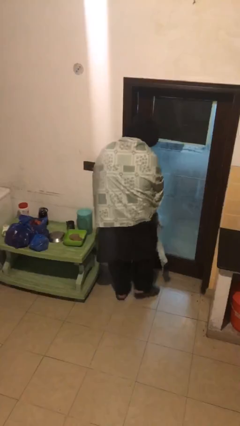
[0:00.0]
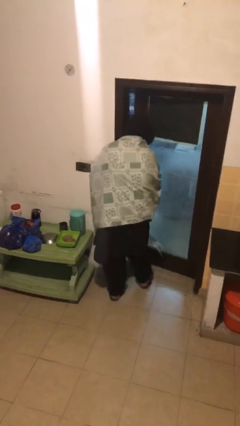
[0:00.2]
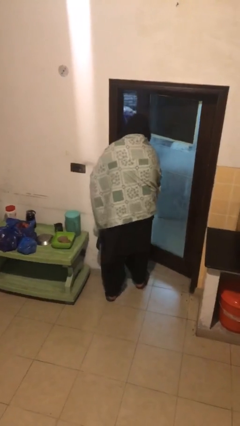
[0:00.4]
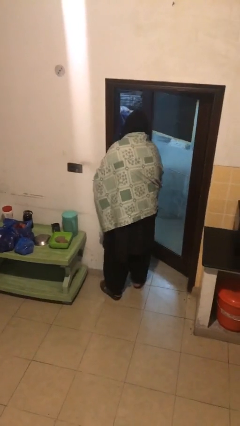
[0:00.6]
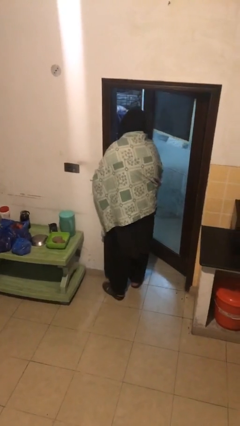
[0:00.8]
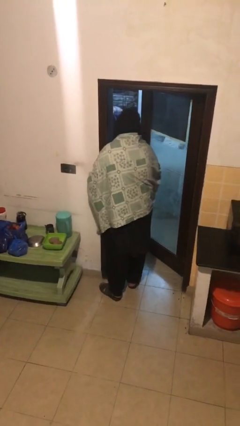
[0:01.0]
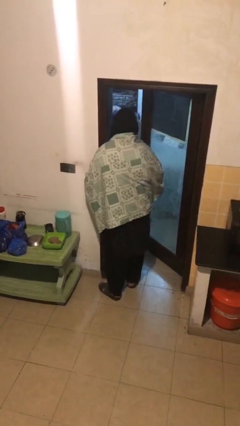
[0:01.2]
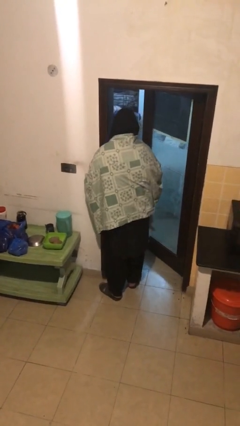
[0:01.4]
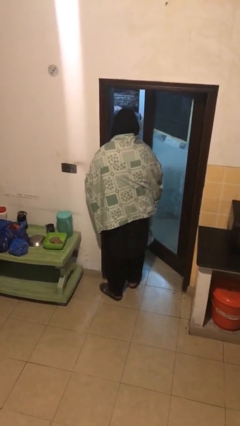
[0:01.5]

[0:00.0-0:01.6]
person opens facility door

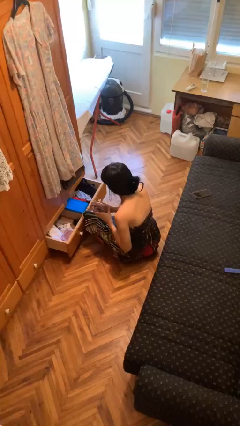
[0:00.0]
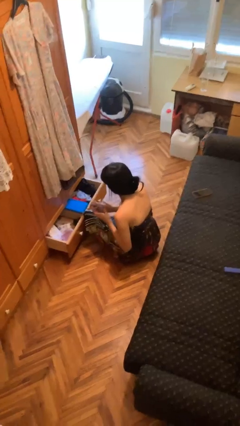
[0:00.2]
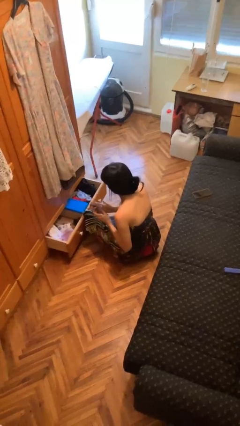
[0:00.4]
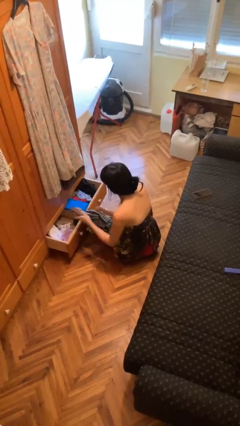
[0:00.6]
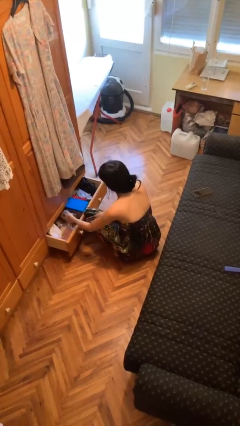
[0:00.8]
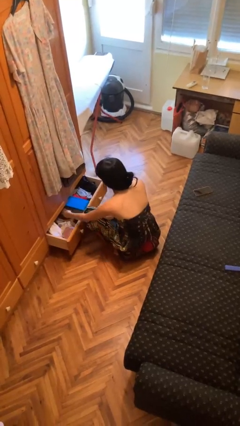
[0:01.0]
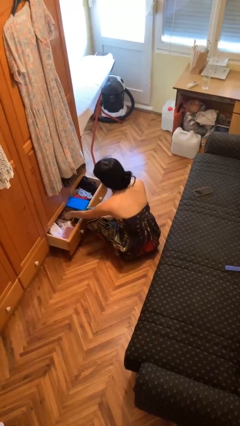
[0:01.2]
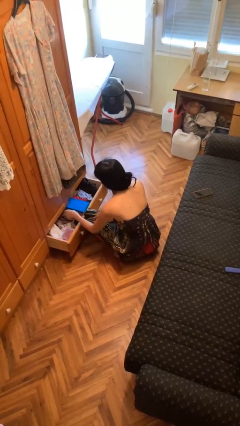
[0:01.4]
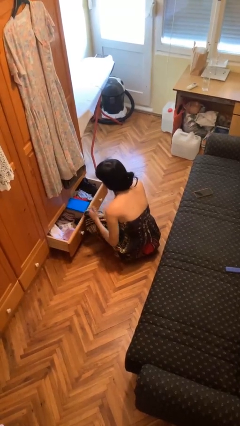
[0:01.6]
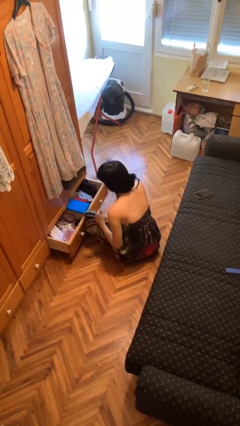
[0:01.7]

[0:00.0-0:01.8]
person puts clothes into dresser

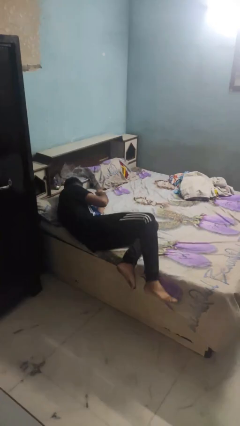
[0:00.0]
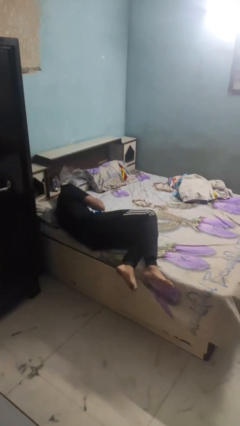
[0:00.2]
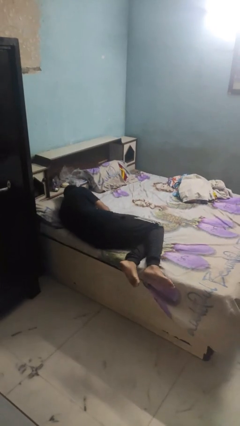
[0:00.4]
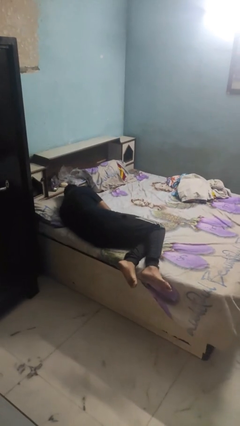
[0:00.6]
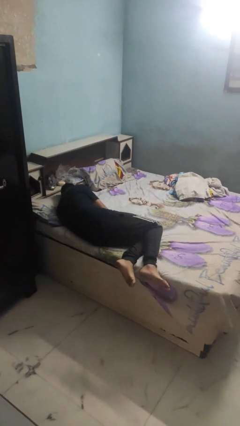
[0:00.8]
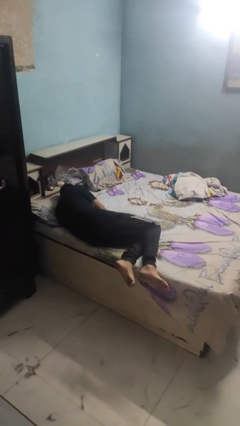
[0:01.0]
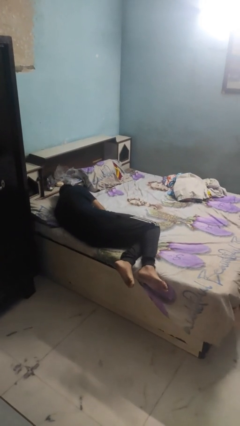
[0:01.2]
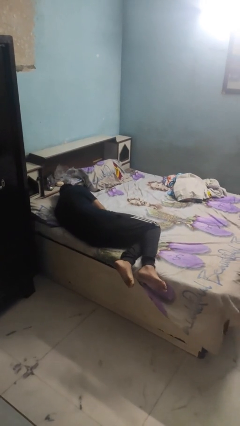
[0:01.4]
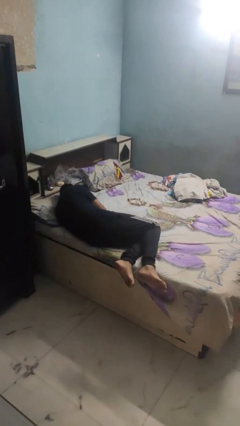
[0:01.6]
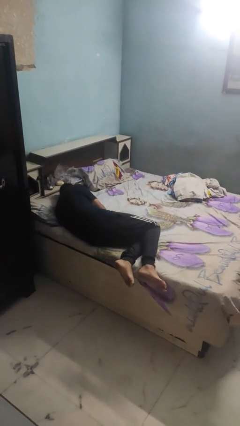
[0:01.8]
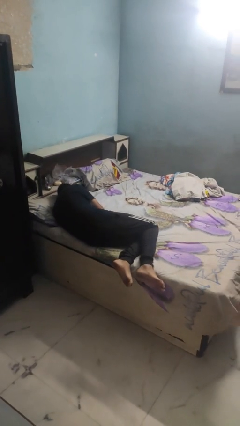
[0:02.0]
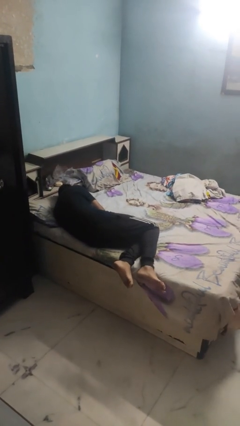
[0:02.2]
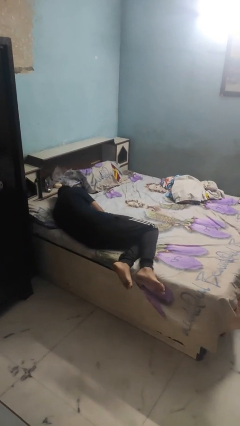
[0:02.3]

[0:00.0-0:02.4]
person lies down on bed

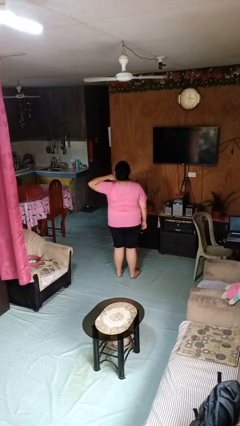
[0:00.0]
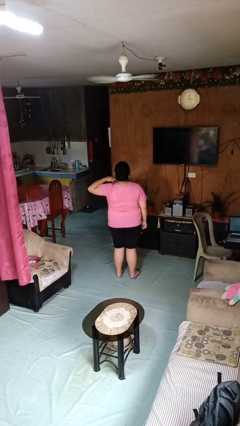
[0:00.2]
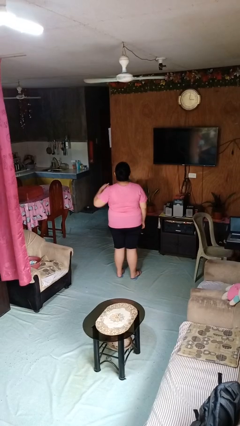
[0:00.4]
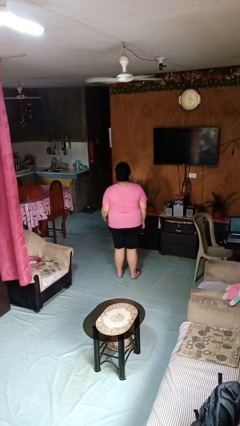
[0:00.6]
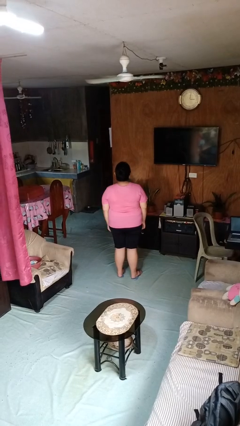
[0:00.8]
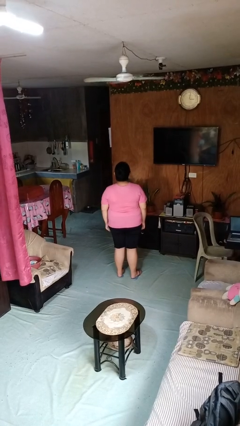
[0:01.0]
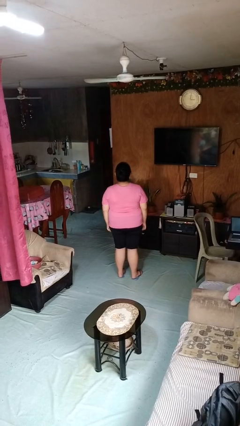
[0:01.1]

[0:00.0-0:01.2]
person gestures cut

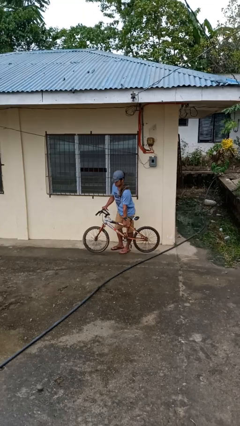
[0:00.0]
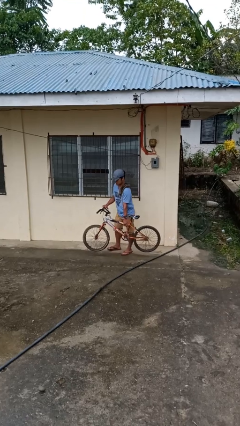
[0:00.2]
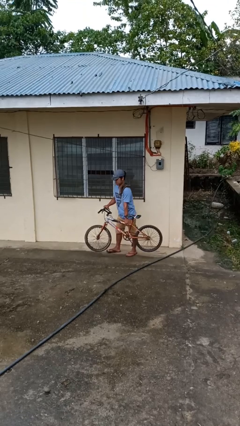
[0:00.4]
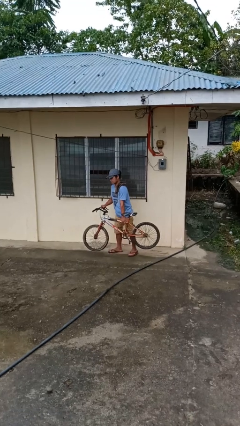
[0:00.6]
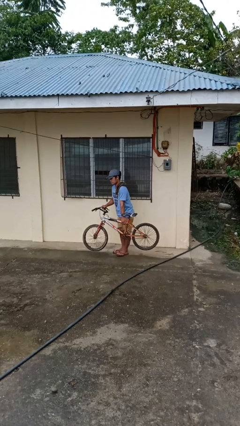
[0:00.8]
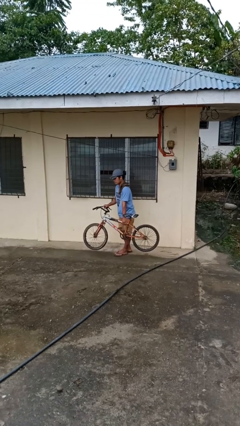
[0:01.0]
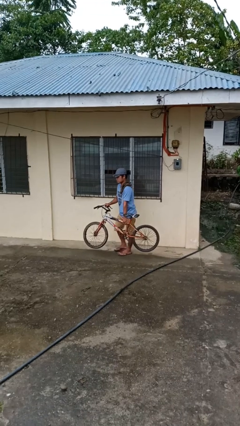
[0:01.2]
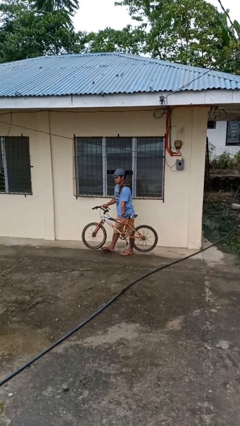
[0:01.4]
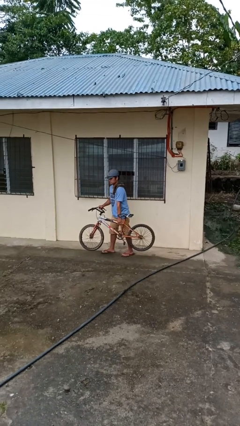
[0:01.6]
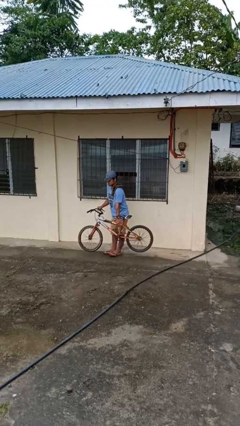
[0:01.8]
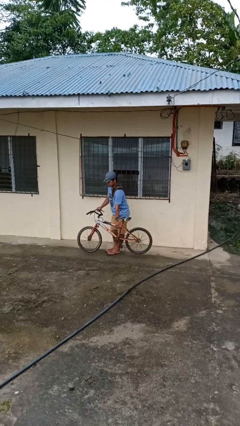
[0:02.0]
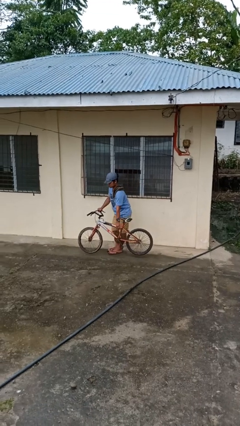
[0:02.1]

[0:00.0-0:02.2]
person carries bicycle

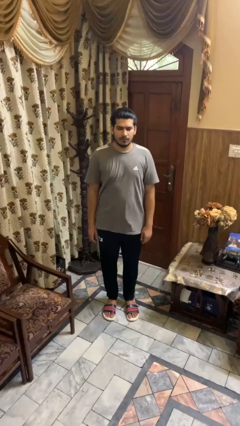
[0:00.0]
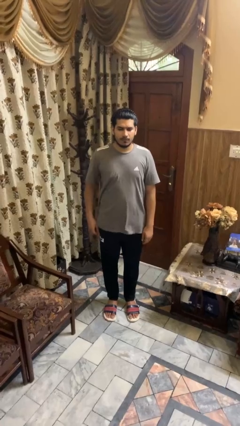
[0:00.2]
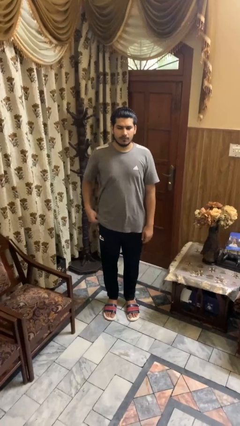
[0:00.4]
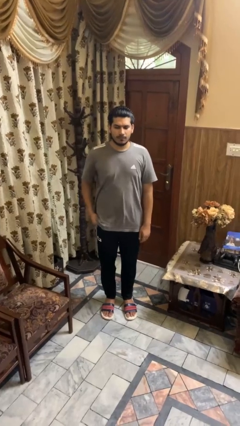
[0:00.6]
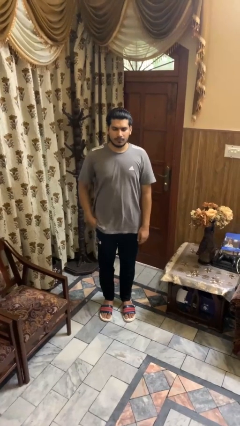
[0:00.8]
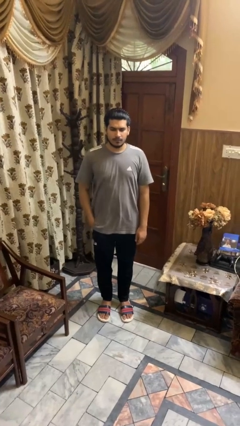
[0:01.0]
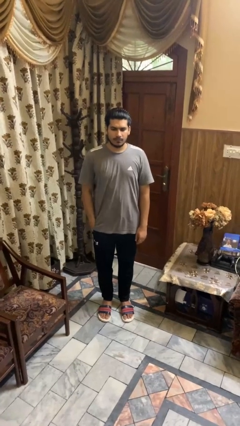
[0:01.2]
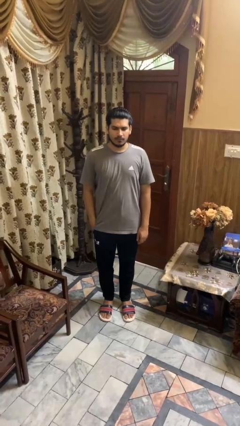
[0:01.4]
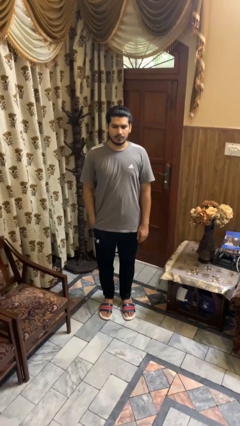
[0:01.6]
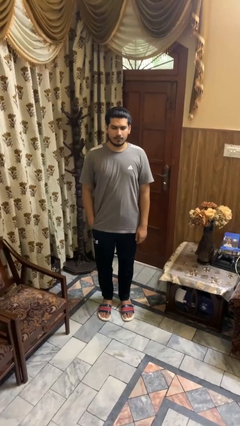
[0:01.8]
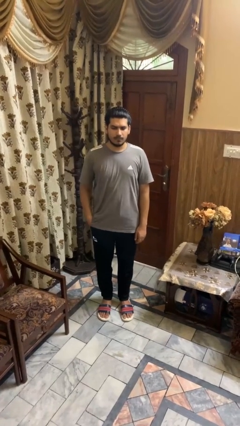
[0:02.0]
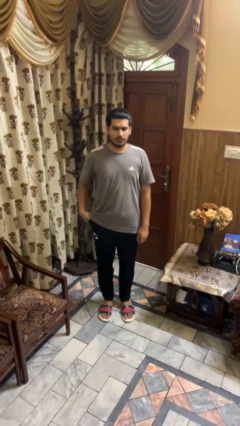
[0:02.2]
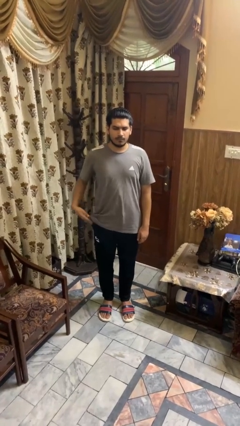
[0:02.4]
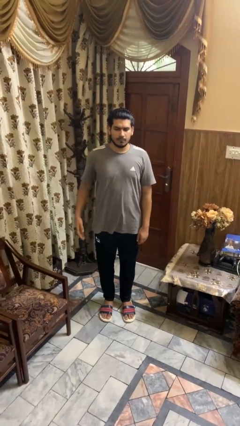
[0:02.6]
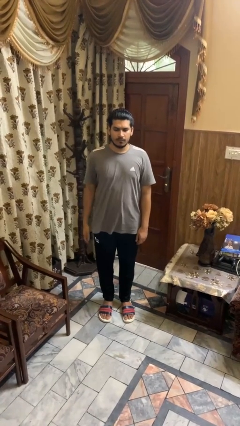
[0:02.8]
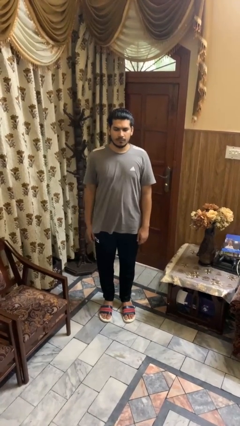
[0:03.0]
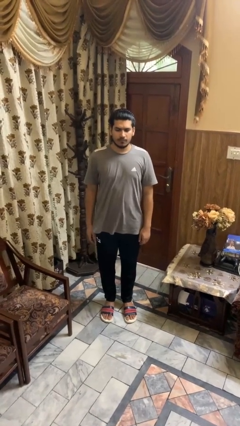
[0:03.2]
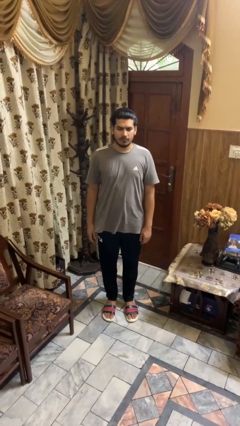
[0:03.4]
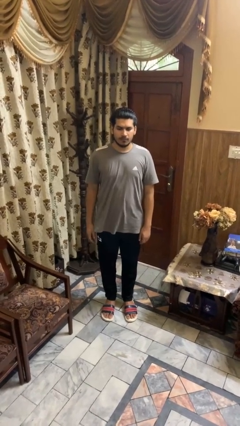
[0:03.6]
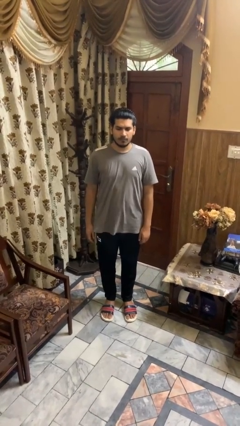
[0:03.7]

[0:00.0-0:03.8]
person puts hands in back pockets

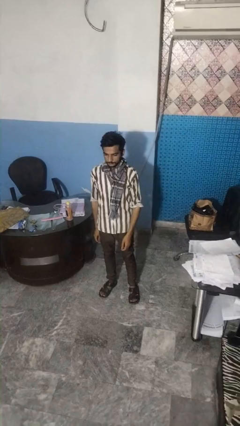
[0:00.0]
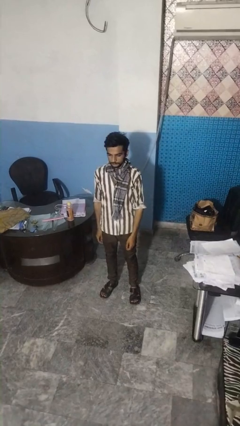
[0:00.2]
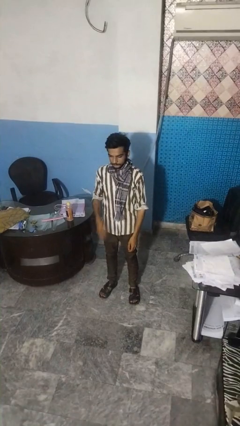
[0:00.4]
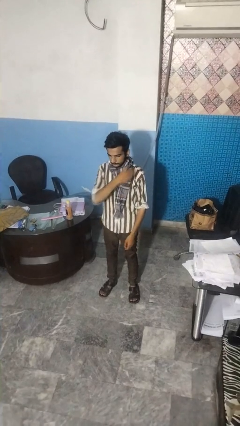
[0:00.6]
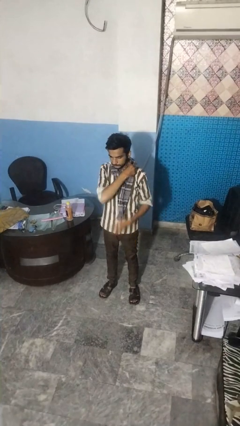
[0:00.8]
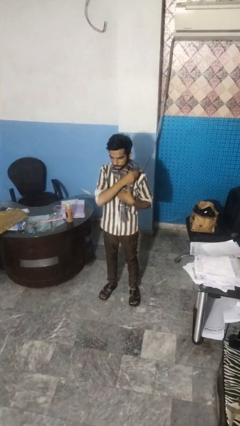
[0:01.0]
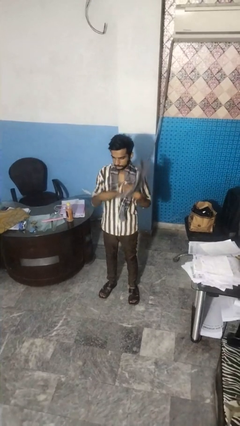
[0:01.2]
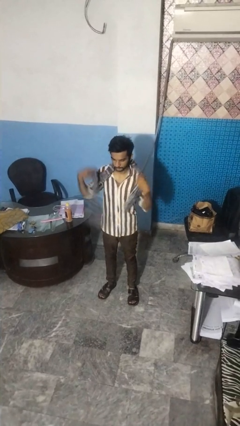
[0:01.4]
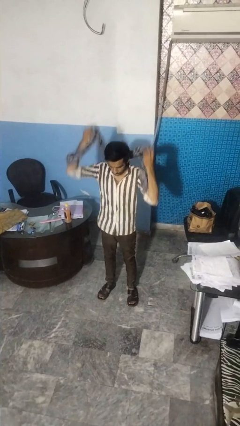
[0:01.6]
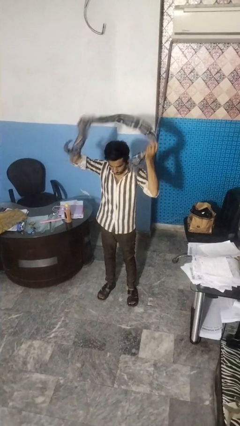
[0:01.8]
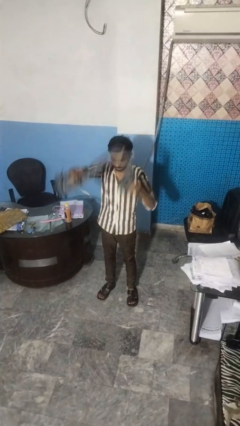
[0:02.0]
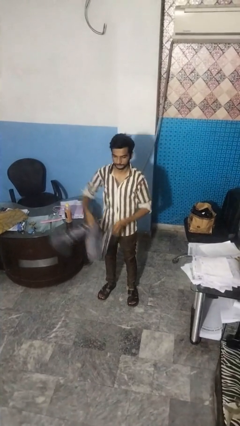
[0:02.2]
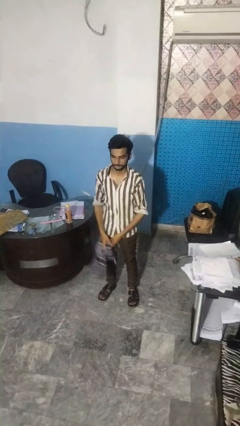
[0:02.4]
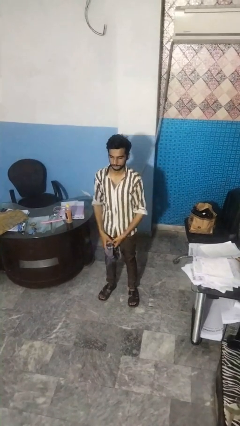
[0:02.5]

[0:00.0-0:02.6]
person takes off scarf

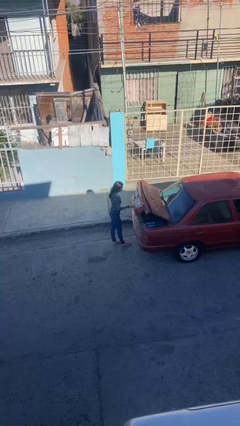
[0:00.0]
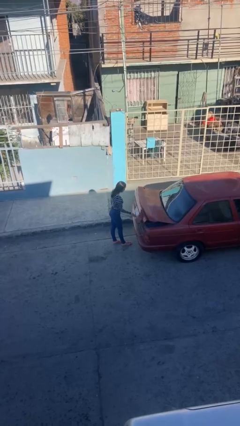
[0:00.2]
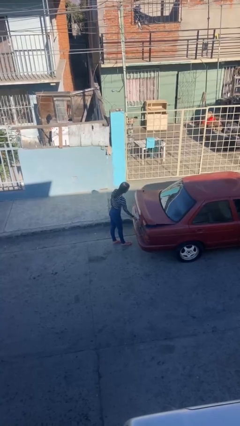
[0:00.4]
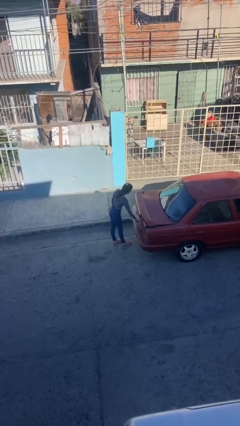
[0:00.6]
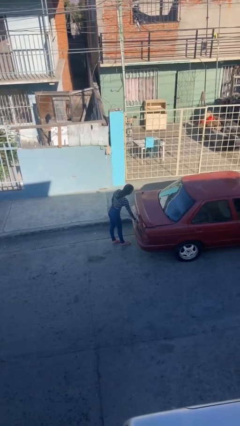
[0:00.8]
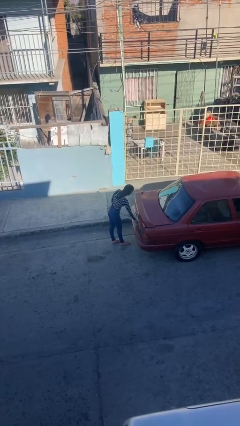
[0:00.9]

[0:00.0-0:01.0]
person closes car trunk

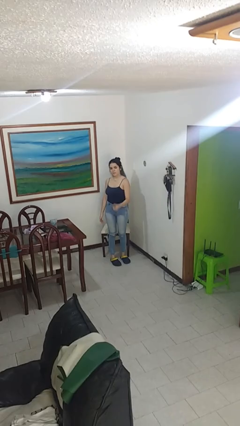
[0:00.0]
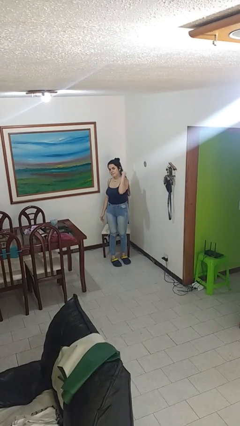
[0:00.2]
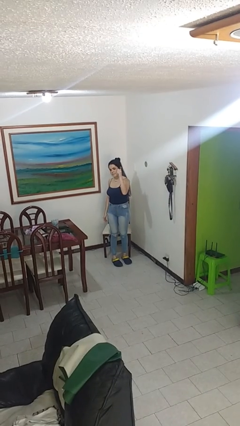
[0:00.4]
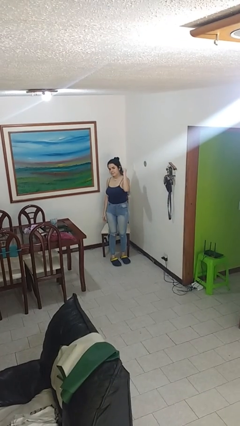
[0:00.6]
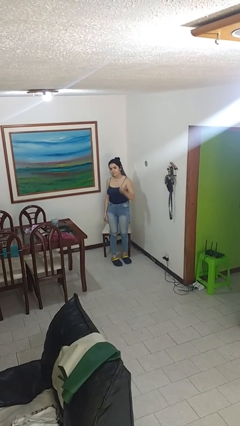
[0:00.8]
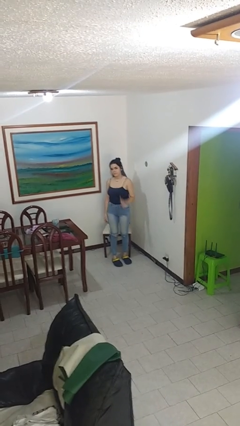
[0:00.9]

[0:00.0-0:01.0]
person gestures behind me
